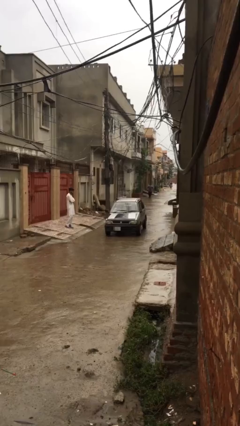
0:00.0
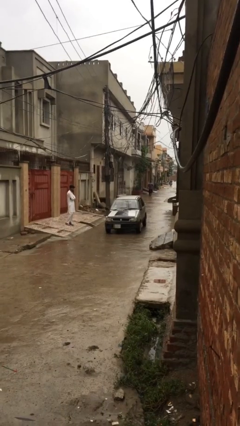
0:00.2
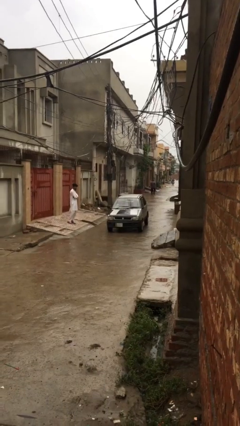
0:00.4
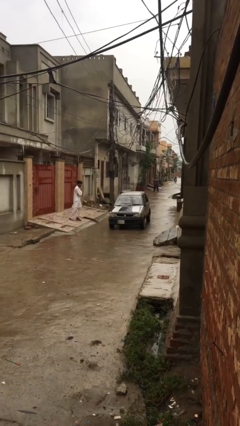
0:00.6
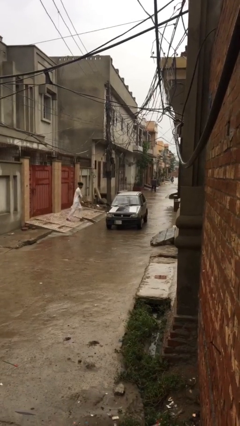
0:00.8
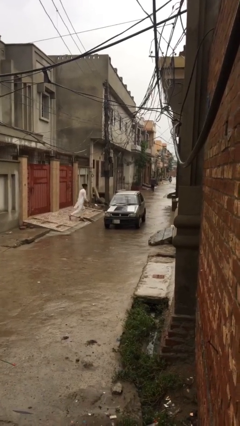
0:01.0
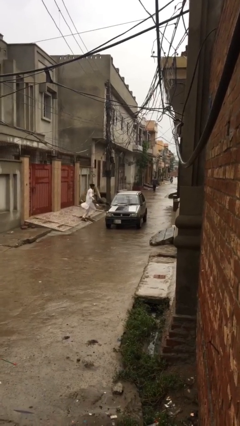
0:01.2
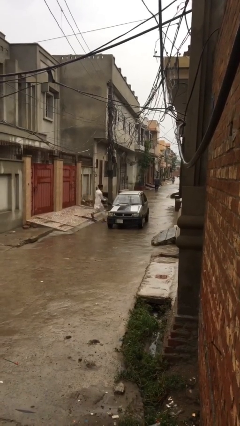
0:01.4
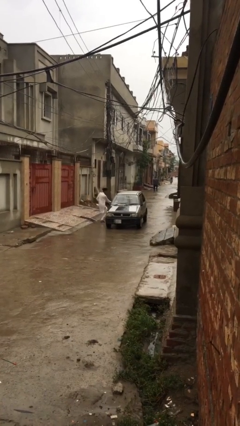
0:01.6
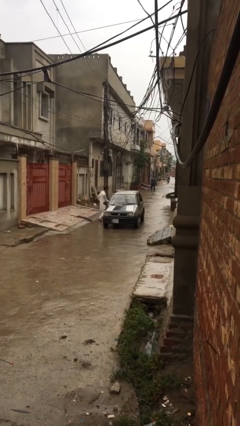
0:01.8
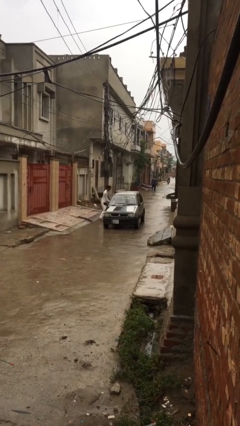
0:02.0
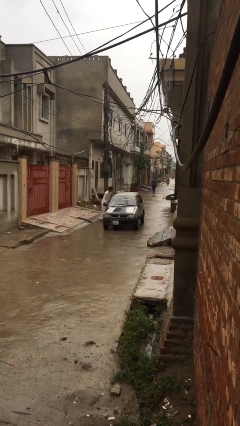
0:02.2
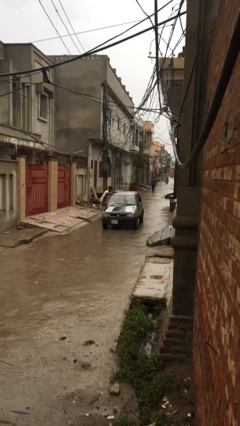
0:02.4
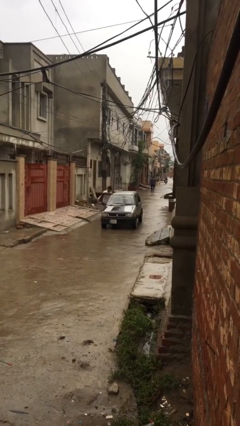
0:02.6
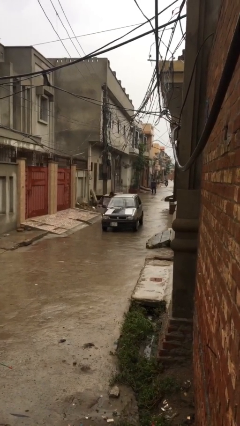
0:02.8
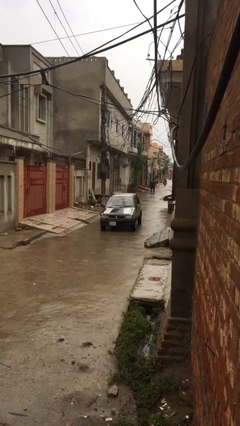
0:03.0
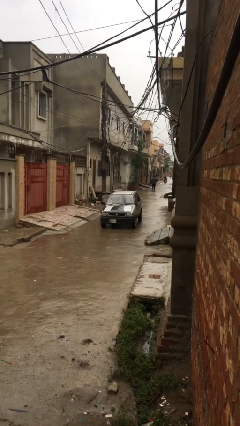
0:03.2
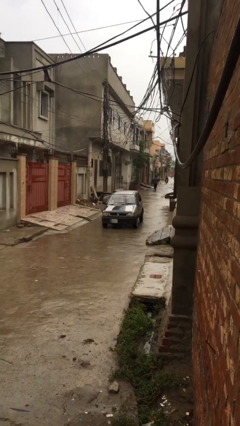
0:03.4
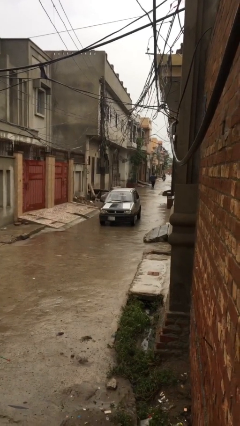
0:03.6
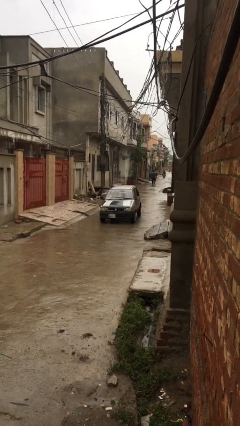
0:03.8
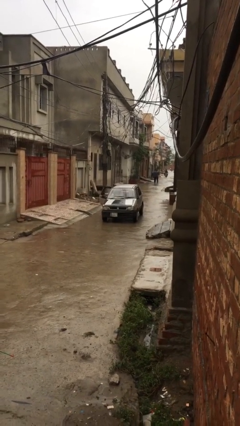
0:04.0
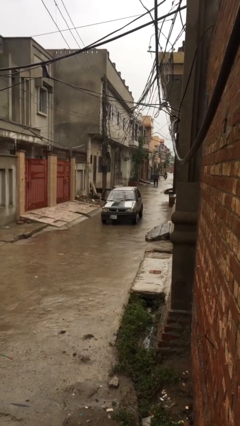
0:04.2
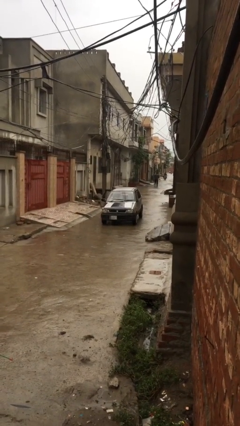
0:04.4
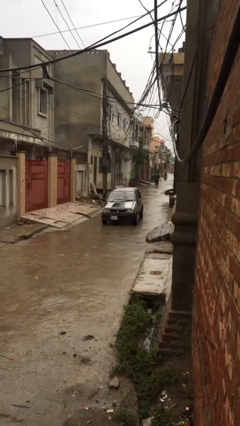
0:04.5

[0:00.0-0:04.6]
car picks up person

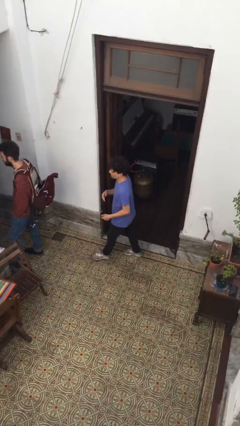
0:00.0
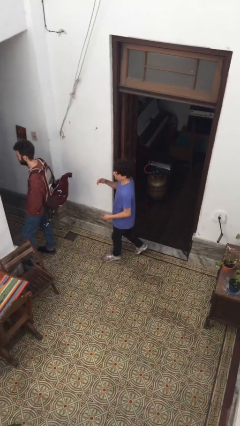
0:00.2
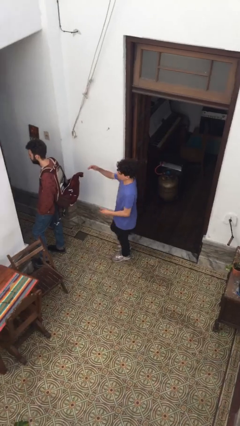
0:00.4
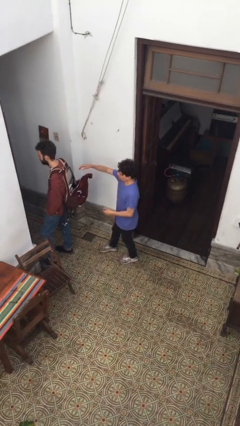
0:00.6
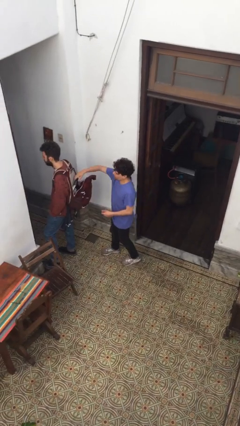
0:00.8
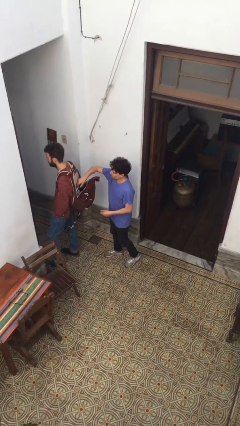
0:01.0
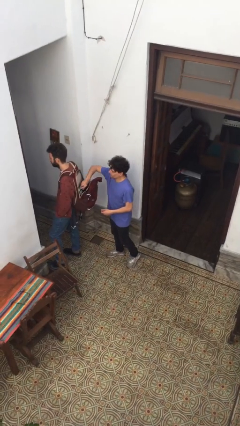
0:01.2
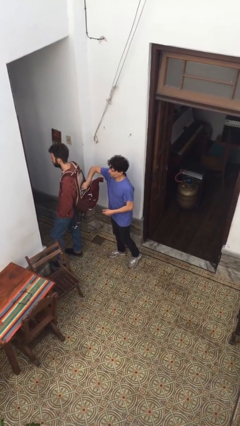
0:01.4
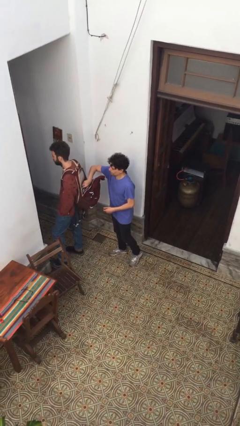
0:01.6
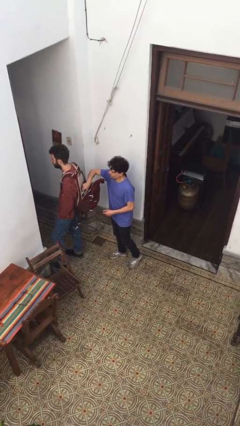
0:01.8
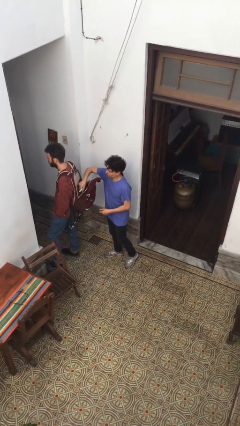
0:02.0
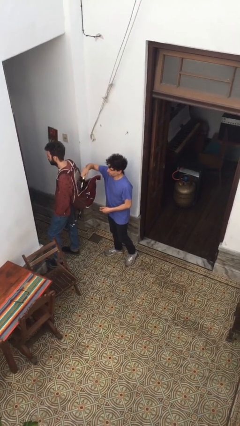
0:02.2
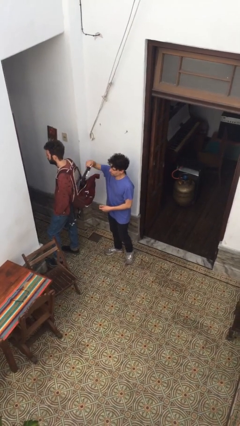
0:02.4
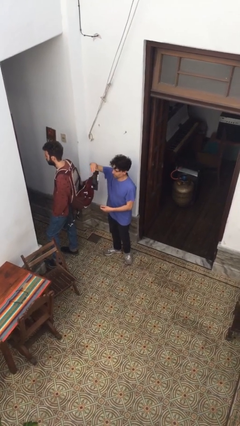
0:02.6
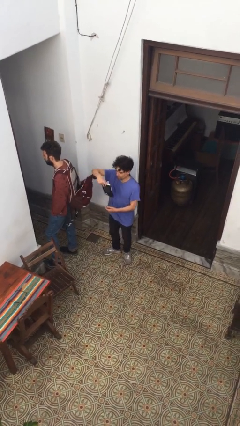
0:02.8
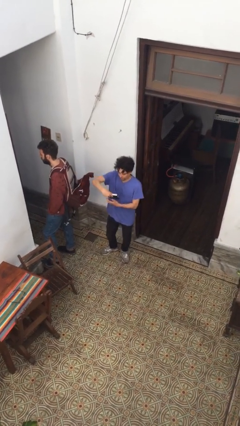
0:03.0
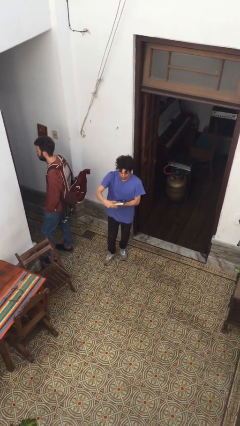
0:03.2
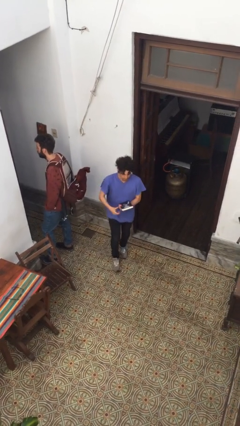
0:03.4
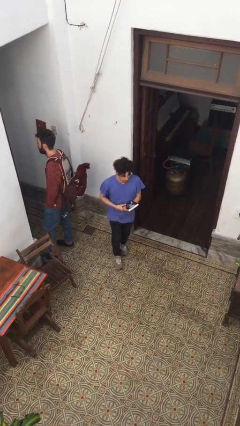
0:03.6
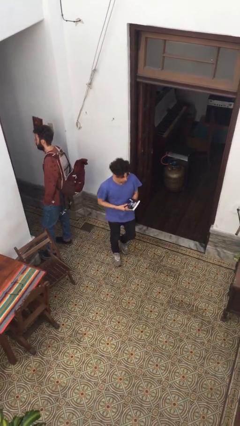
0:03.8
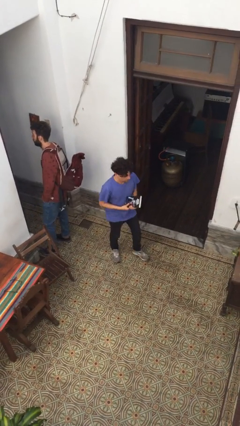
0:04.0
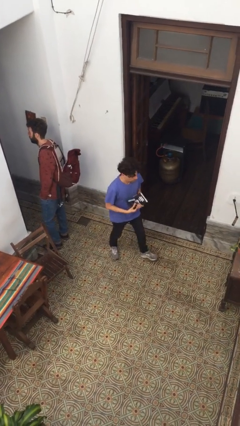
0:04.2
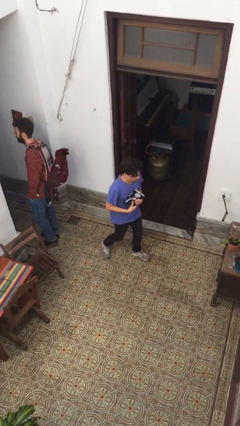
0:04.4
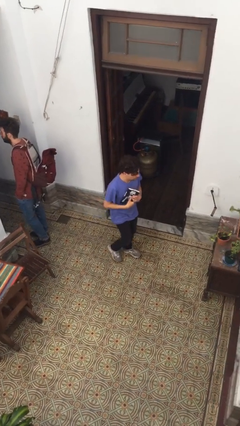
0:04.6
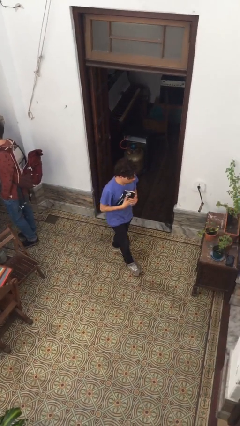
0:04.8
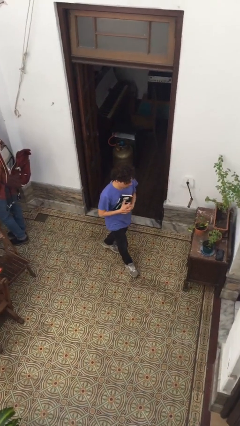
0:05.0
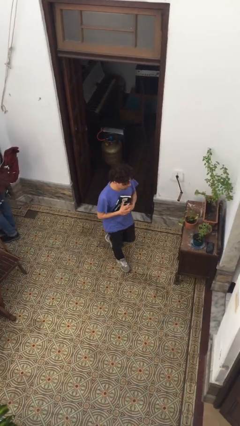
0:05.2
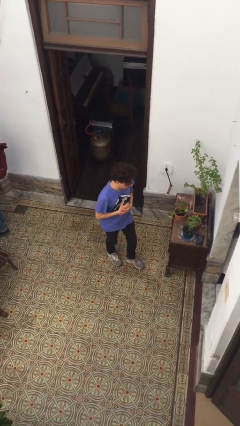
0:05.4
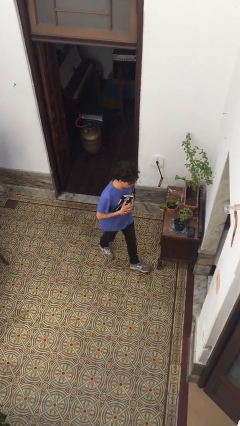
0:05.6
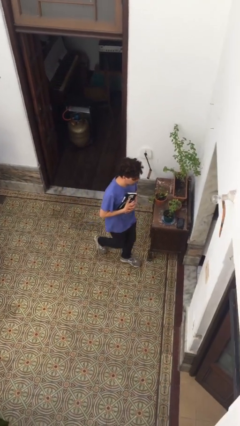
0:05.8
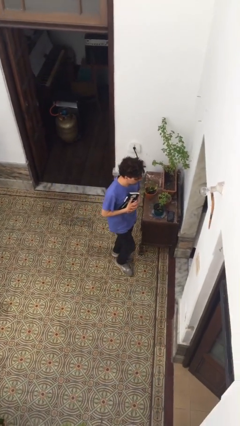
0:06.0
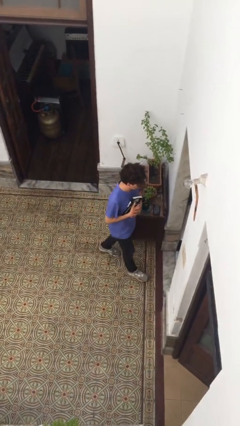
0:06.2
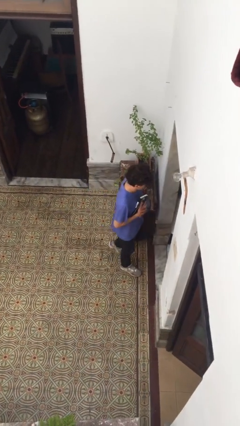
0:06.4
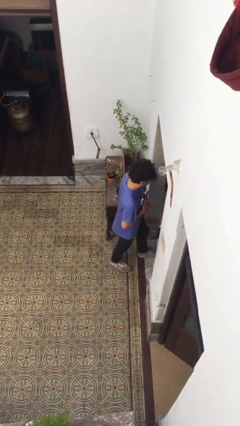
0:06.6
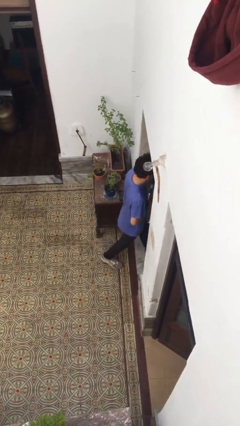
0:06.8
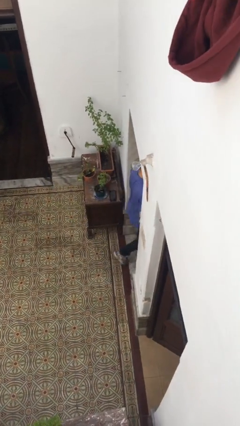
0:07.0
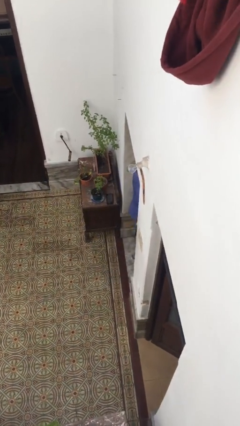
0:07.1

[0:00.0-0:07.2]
person steals object from person

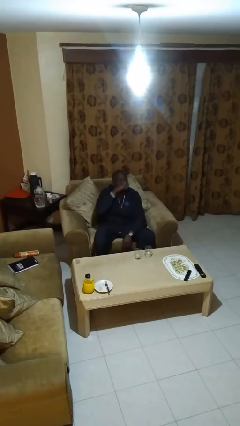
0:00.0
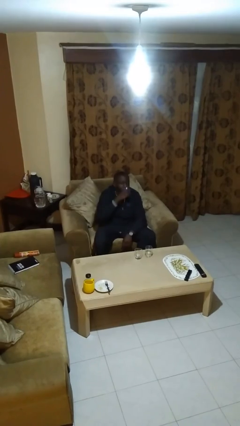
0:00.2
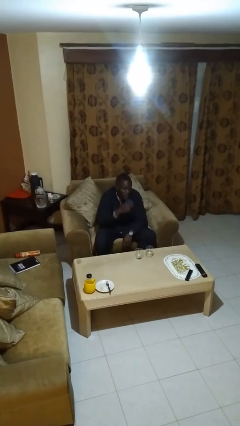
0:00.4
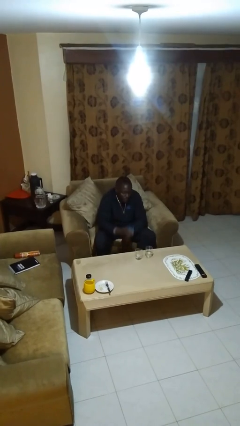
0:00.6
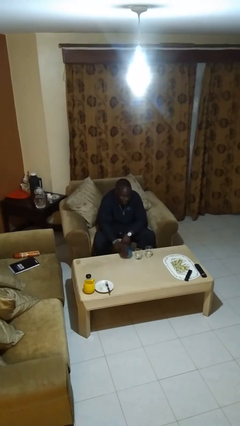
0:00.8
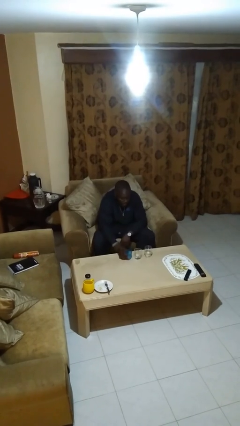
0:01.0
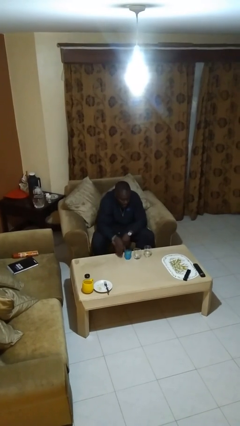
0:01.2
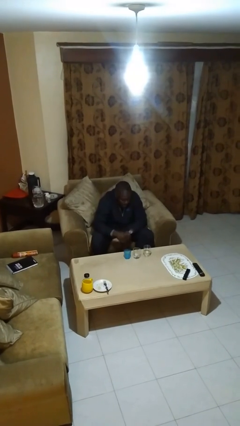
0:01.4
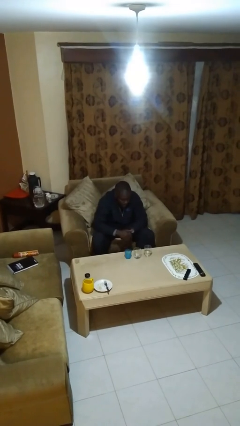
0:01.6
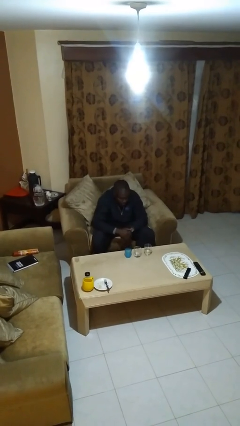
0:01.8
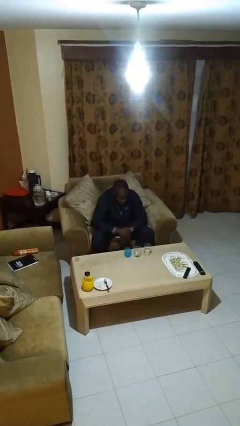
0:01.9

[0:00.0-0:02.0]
person puts down object on table

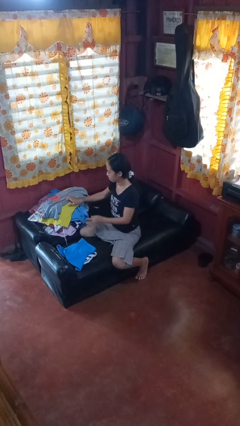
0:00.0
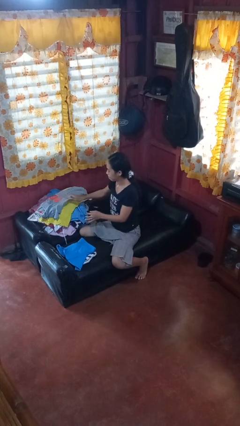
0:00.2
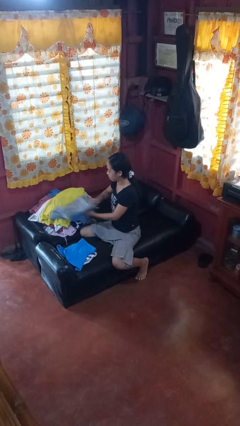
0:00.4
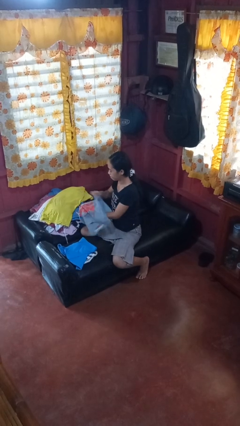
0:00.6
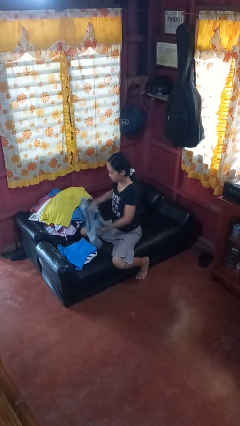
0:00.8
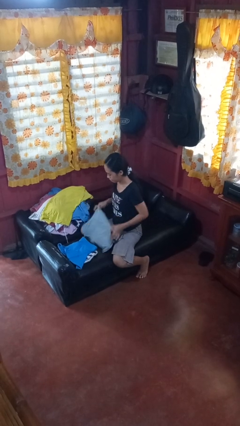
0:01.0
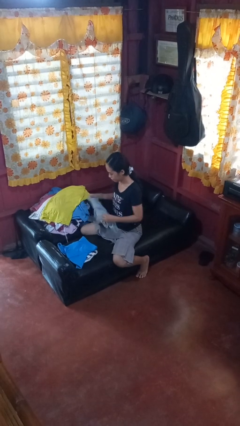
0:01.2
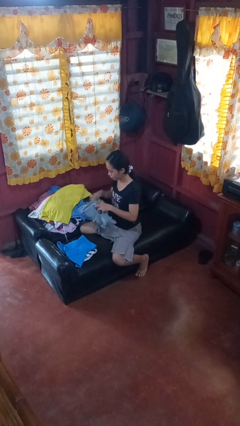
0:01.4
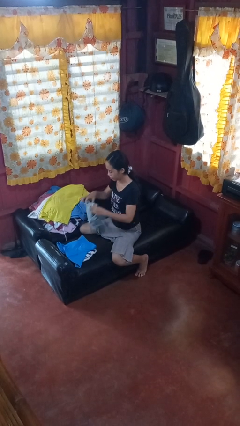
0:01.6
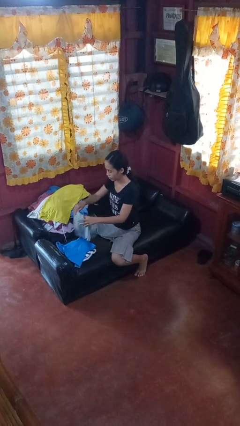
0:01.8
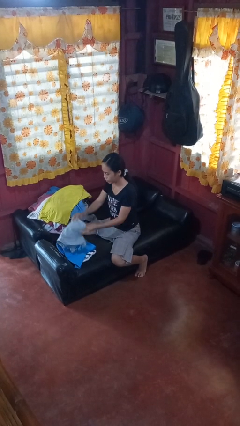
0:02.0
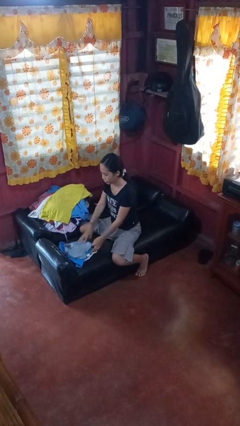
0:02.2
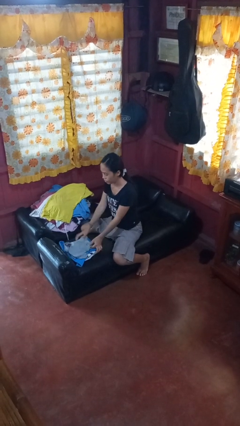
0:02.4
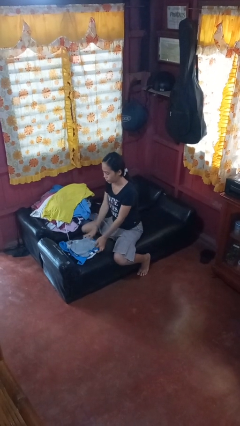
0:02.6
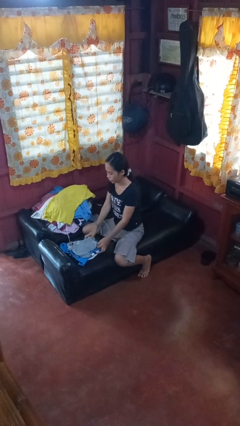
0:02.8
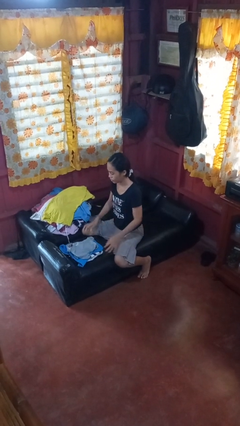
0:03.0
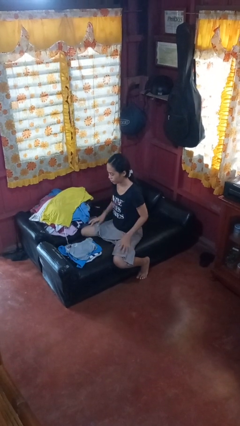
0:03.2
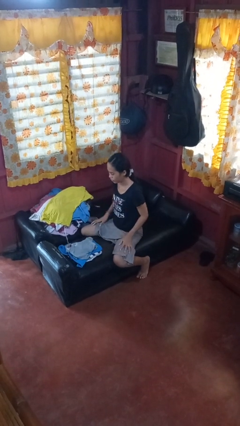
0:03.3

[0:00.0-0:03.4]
person folds shirt

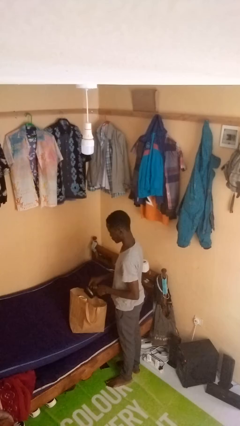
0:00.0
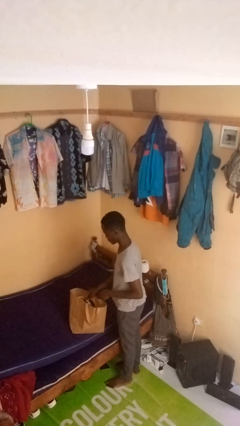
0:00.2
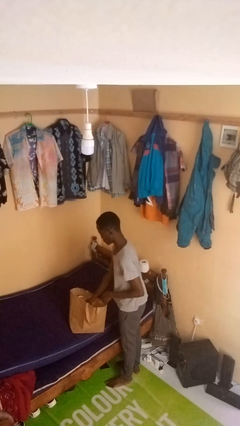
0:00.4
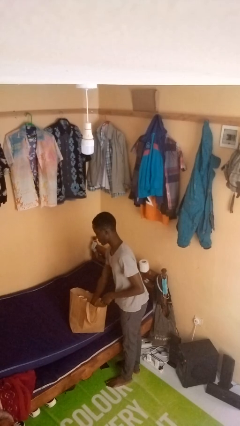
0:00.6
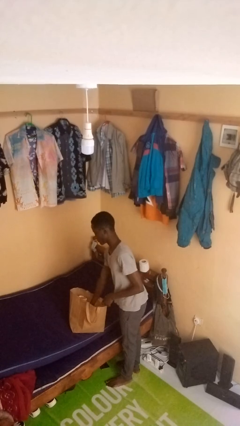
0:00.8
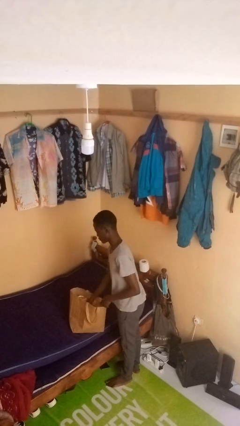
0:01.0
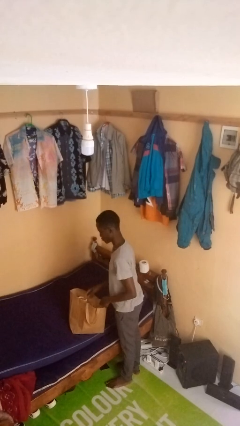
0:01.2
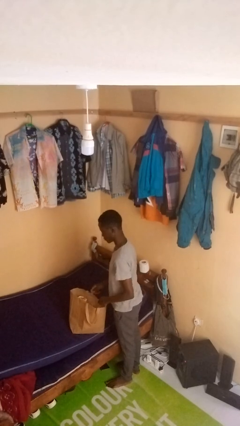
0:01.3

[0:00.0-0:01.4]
person puts object into bag
